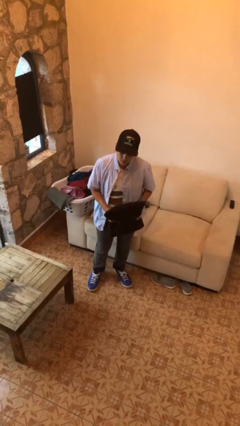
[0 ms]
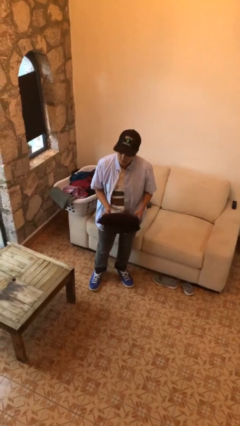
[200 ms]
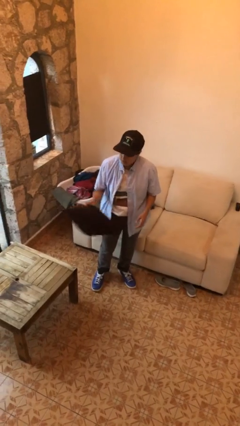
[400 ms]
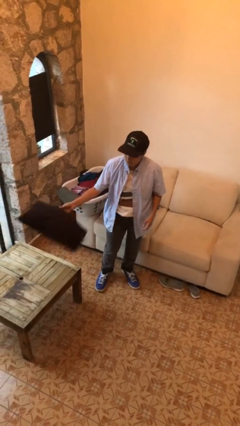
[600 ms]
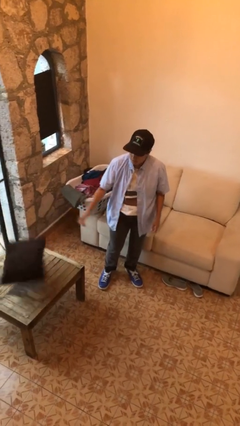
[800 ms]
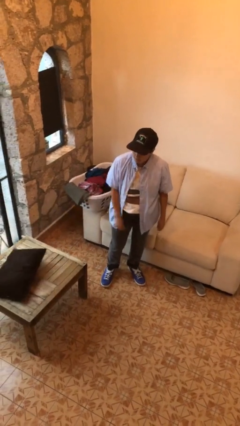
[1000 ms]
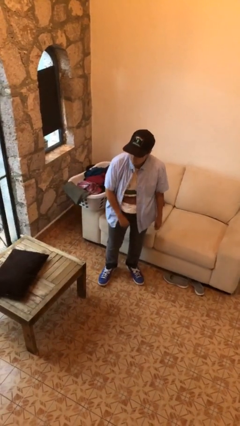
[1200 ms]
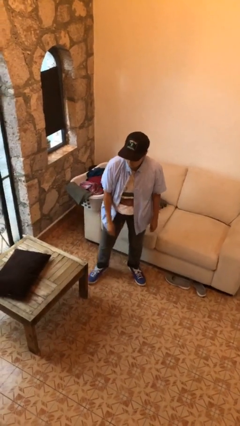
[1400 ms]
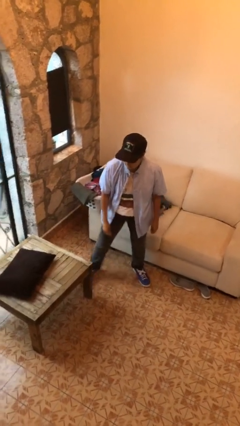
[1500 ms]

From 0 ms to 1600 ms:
person throws object on table

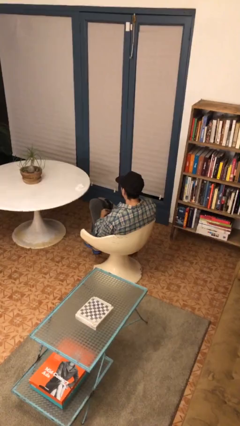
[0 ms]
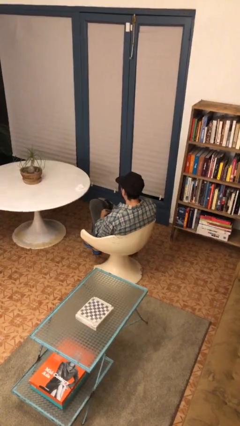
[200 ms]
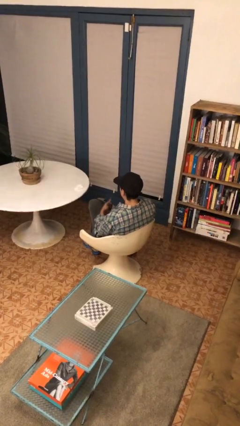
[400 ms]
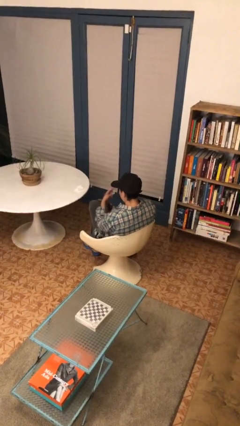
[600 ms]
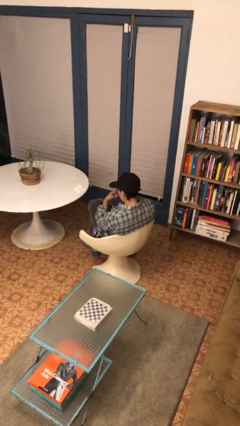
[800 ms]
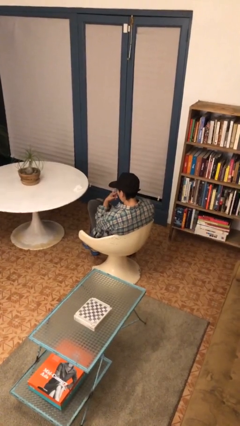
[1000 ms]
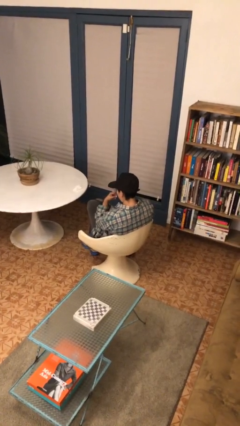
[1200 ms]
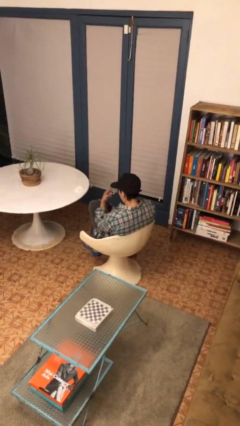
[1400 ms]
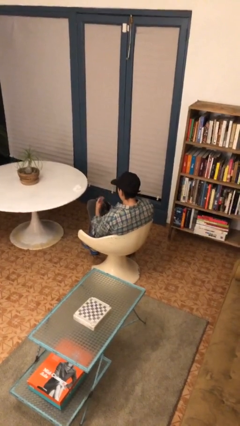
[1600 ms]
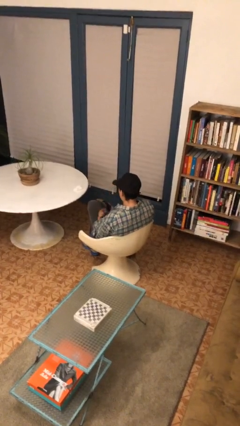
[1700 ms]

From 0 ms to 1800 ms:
person gestures watch closely

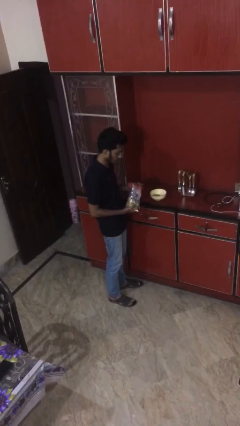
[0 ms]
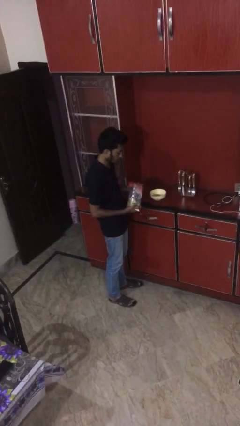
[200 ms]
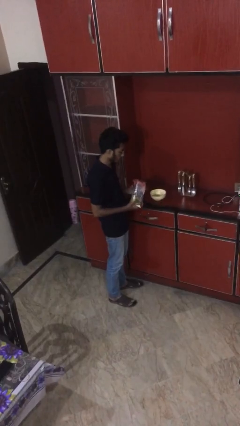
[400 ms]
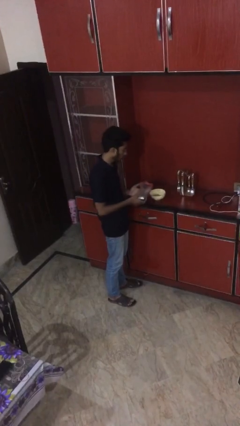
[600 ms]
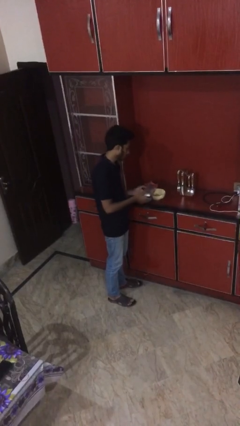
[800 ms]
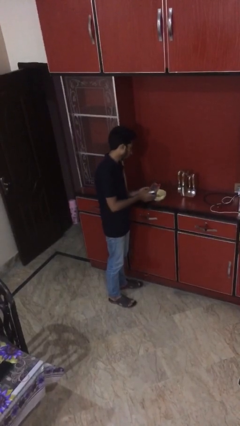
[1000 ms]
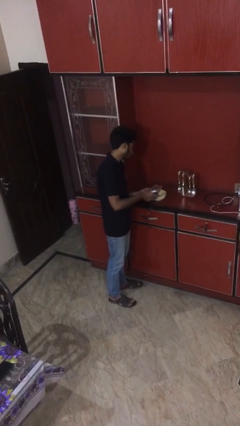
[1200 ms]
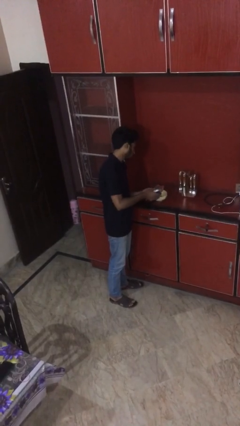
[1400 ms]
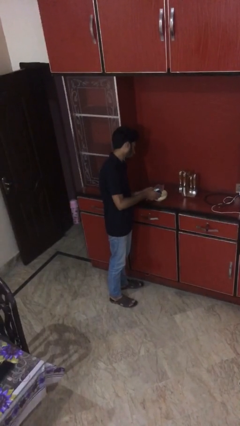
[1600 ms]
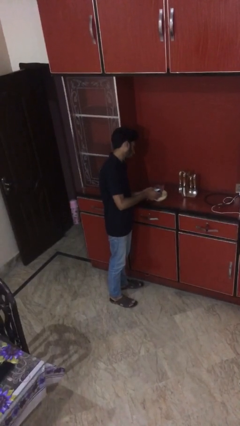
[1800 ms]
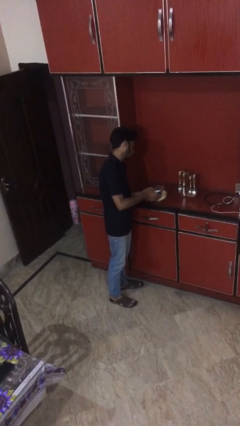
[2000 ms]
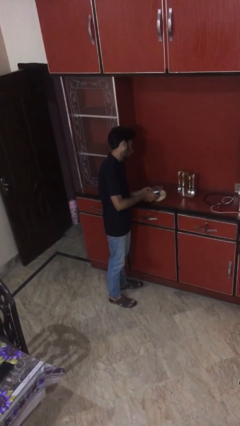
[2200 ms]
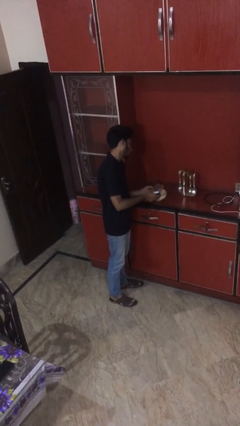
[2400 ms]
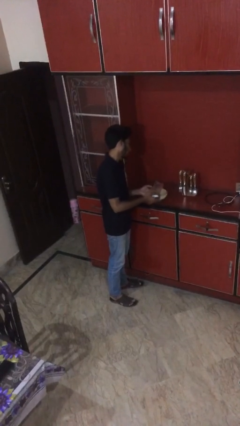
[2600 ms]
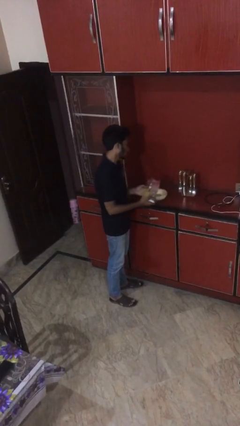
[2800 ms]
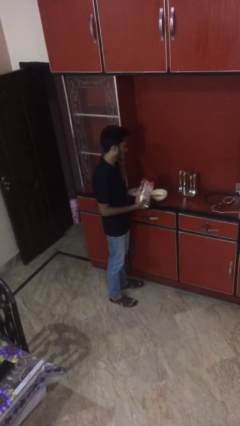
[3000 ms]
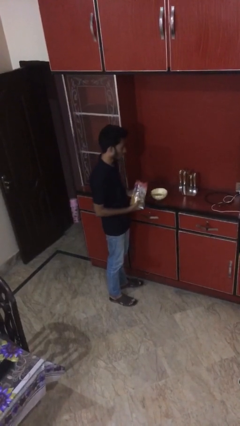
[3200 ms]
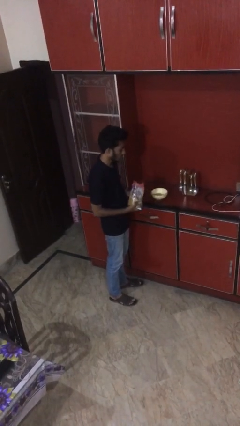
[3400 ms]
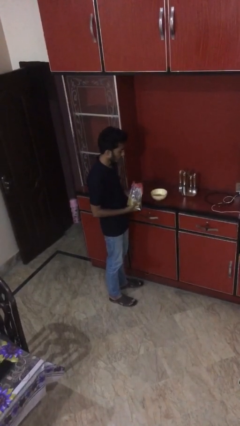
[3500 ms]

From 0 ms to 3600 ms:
person pours into bowl

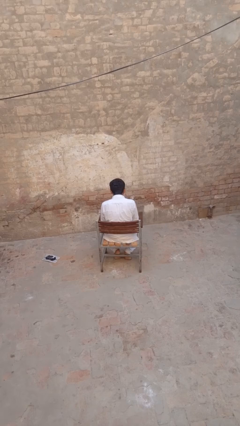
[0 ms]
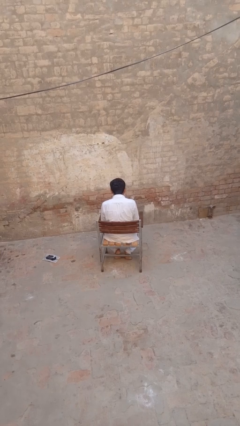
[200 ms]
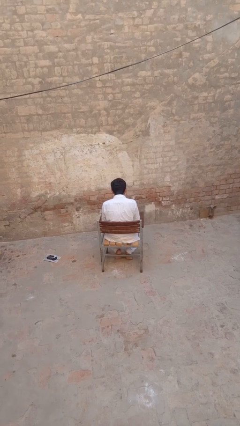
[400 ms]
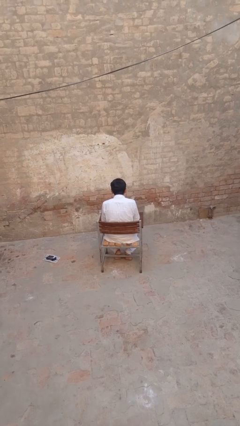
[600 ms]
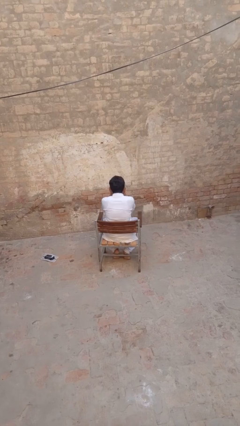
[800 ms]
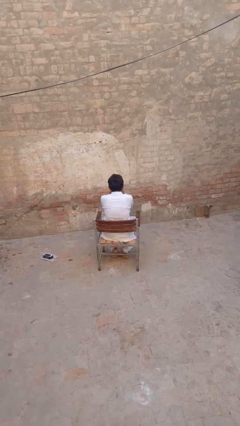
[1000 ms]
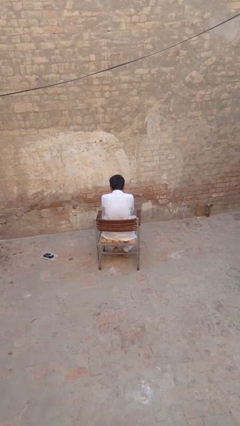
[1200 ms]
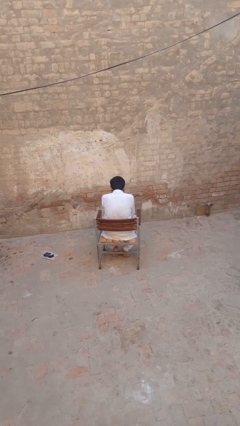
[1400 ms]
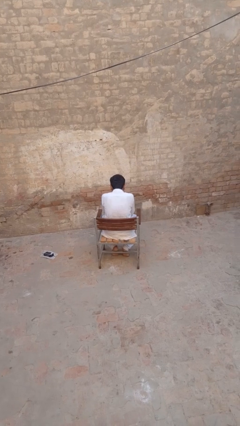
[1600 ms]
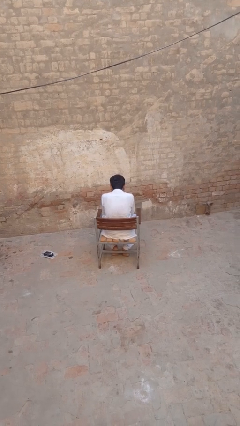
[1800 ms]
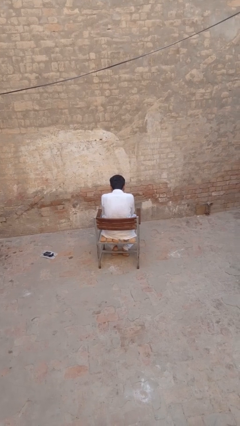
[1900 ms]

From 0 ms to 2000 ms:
person sneezes into hand

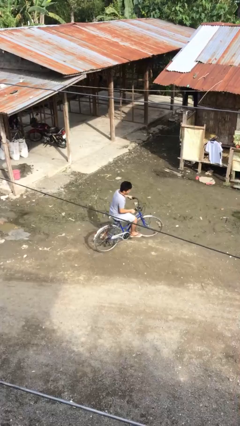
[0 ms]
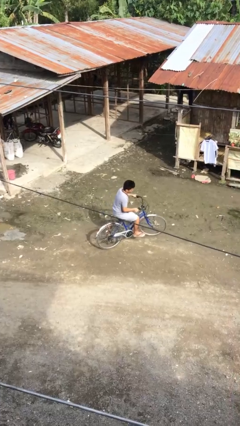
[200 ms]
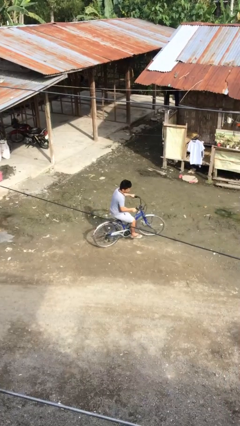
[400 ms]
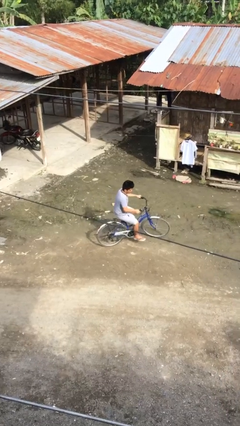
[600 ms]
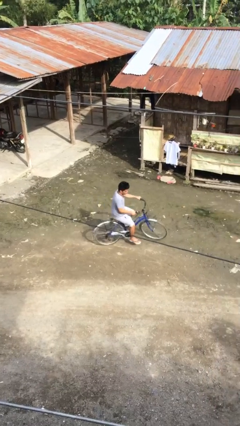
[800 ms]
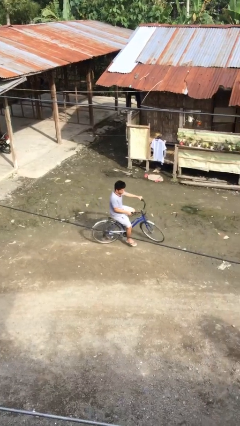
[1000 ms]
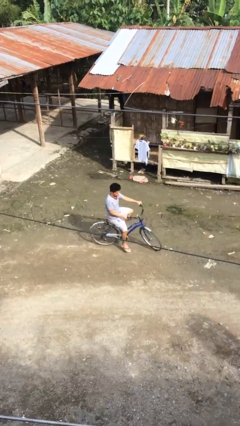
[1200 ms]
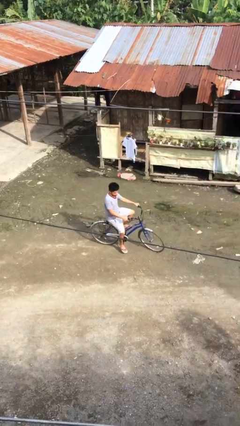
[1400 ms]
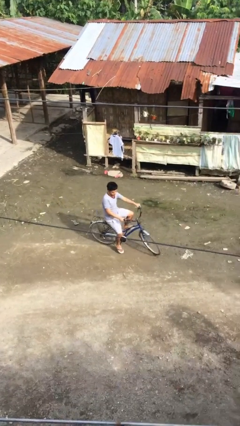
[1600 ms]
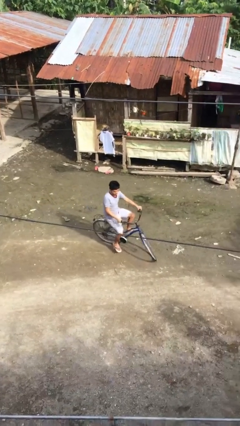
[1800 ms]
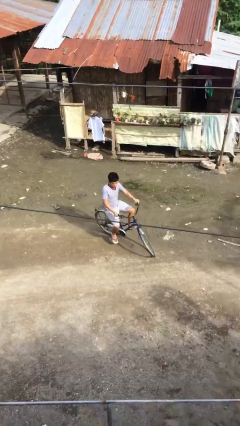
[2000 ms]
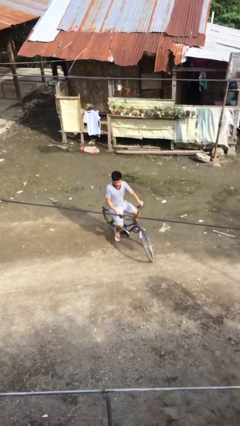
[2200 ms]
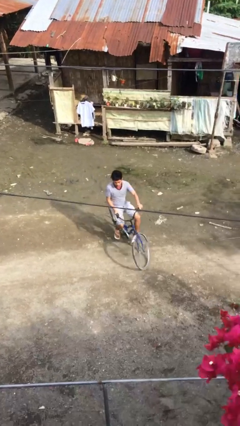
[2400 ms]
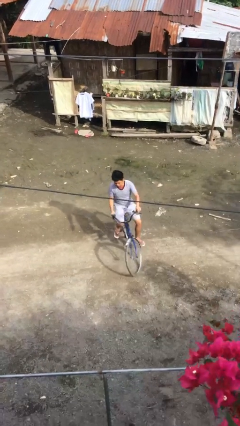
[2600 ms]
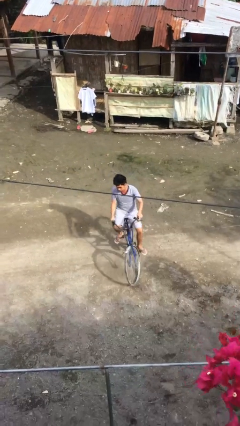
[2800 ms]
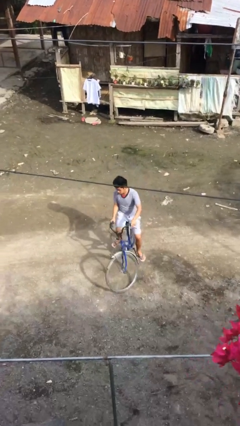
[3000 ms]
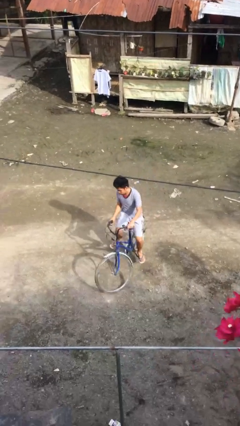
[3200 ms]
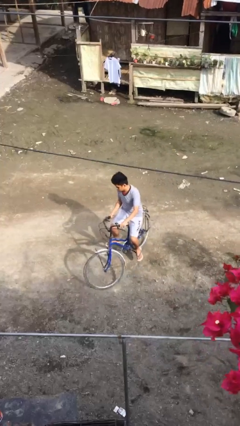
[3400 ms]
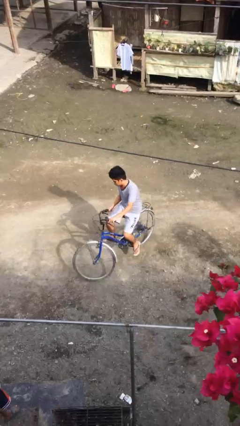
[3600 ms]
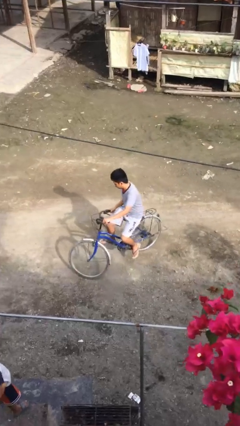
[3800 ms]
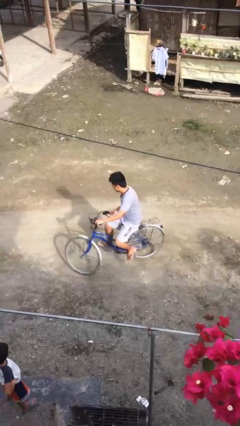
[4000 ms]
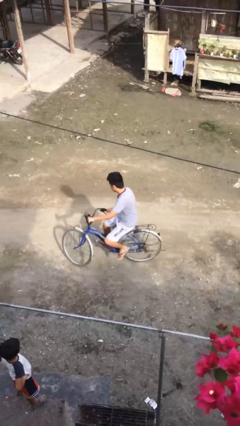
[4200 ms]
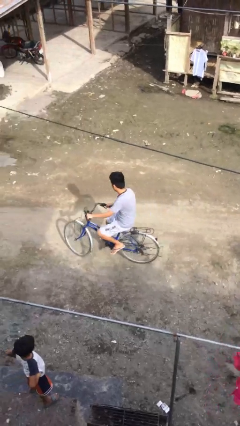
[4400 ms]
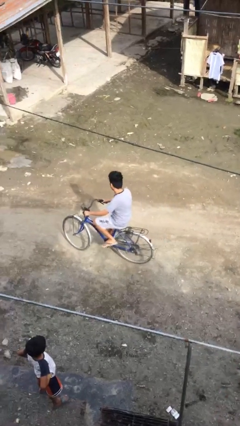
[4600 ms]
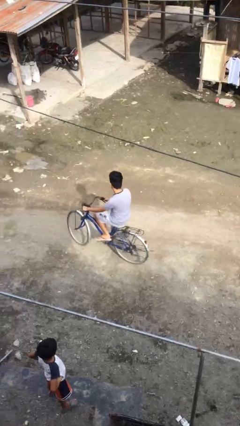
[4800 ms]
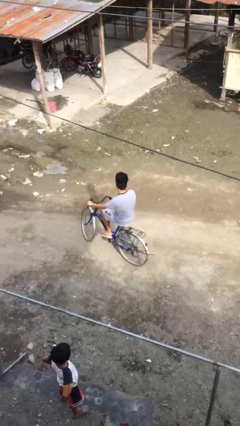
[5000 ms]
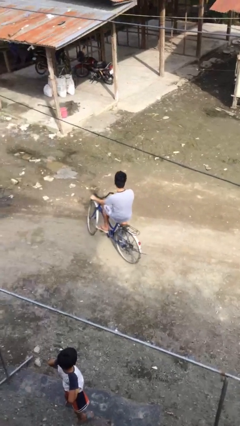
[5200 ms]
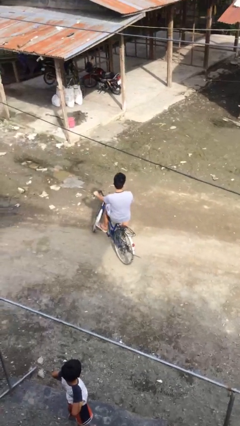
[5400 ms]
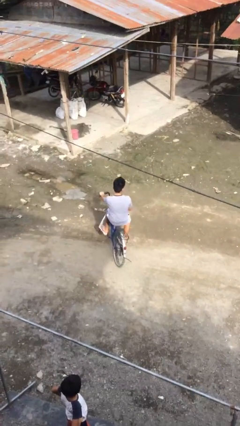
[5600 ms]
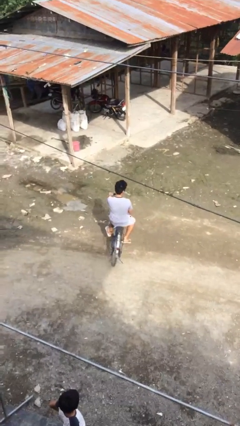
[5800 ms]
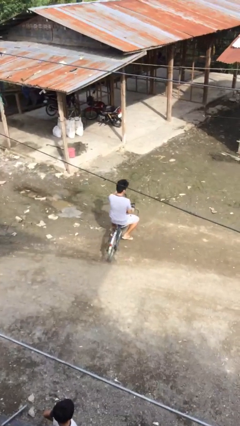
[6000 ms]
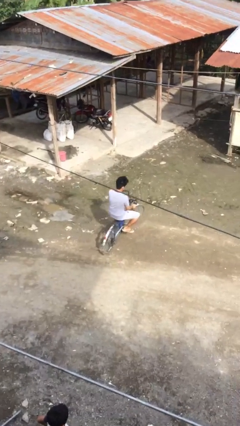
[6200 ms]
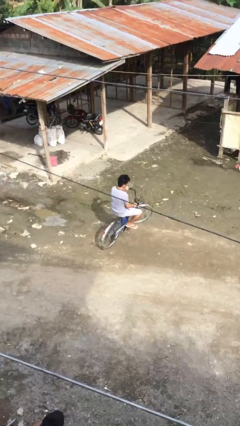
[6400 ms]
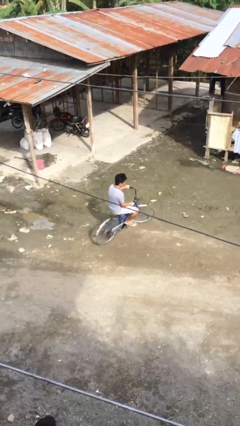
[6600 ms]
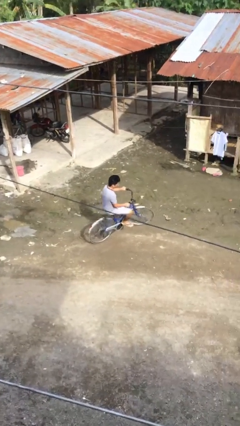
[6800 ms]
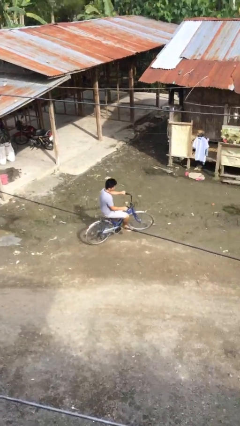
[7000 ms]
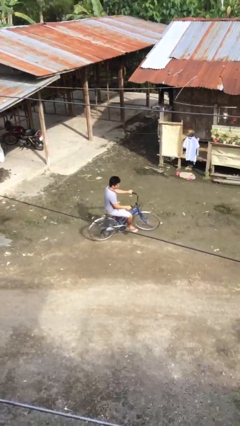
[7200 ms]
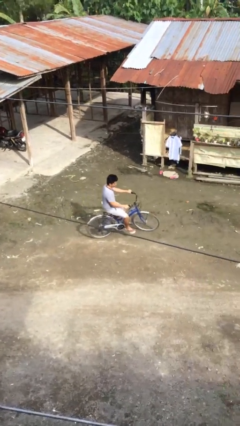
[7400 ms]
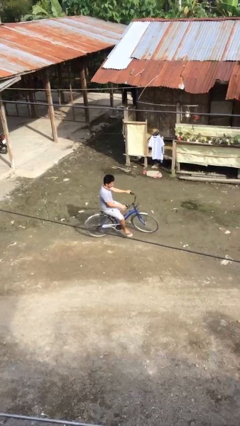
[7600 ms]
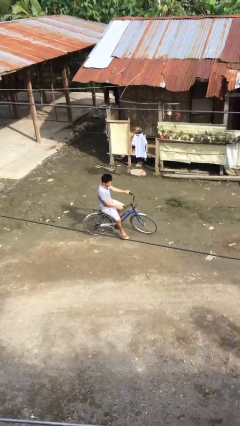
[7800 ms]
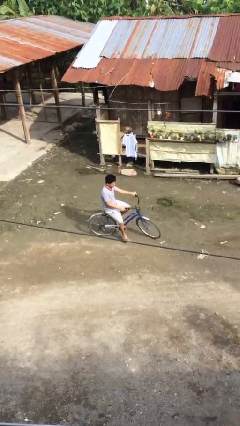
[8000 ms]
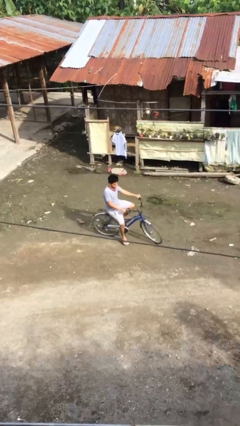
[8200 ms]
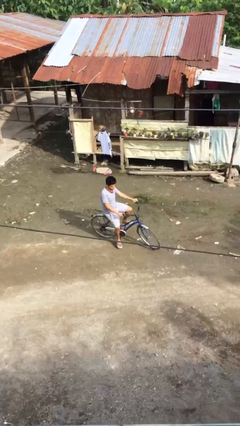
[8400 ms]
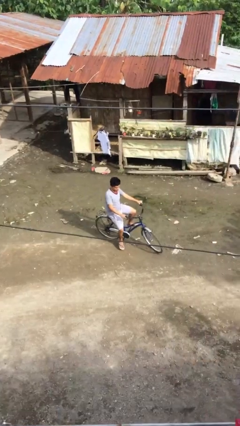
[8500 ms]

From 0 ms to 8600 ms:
person rides bicycle

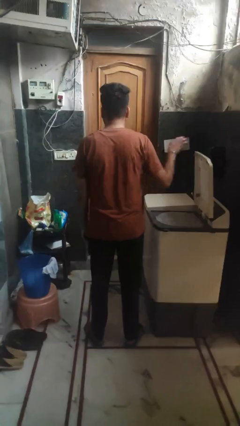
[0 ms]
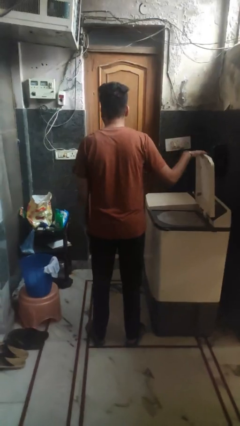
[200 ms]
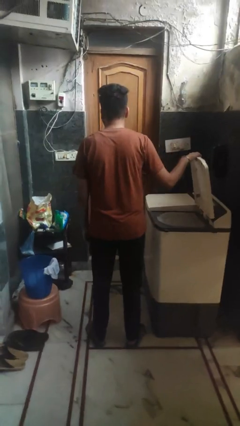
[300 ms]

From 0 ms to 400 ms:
person closes clothes washer
